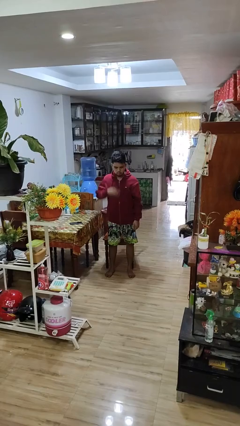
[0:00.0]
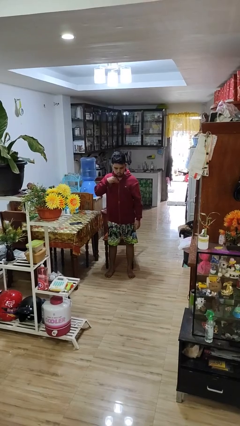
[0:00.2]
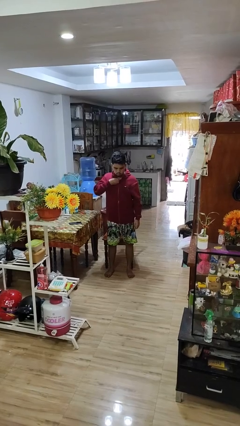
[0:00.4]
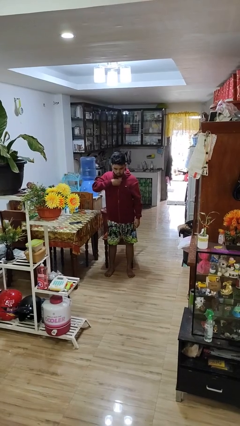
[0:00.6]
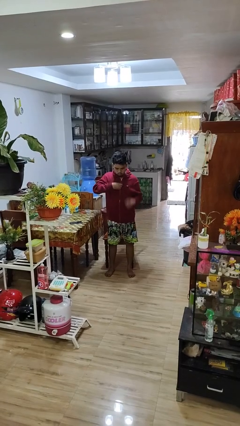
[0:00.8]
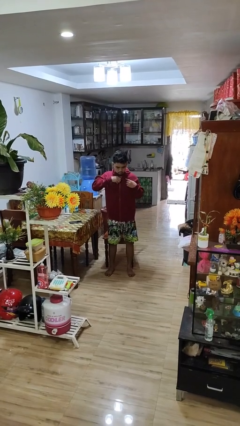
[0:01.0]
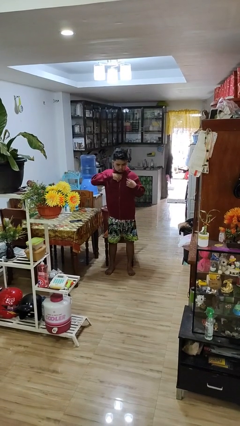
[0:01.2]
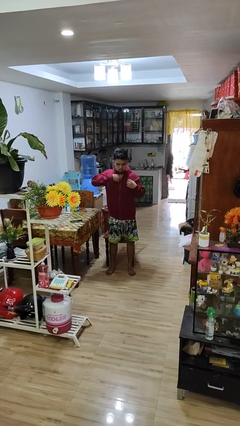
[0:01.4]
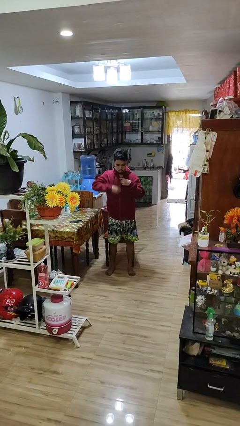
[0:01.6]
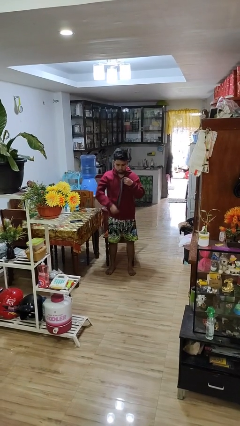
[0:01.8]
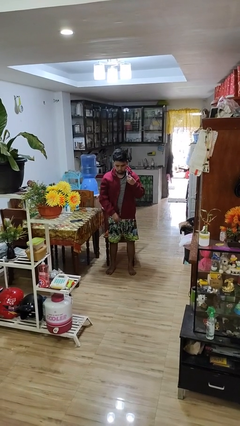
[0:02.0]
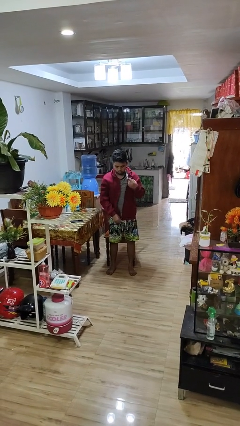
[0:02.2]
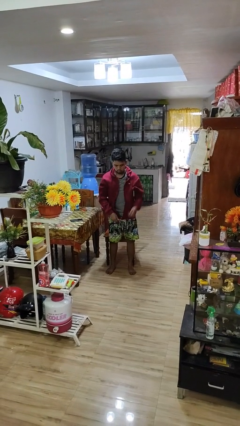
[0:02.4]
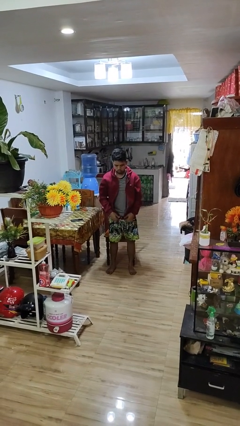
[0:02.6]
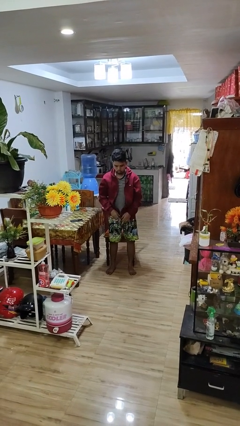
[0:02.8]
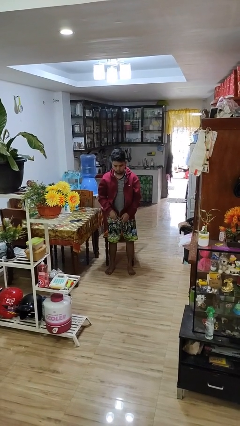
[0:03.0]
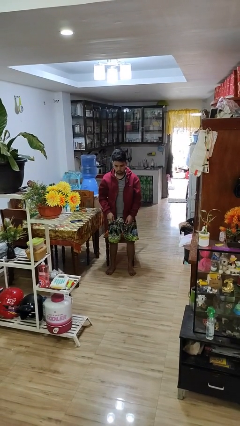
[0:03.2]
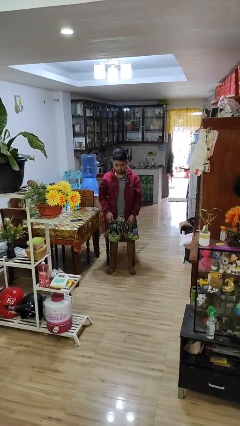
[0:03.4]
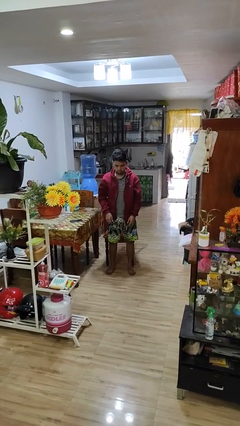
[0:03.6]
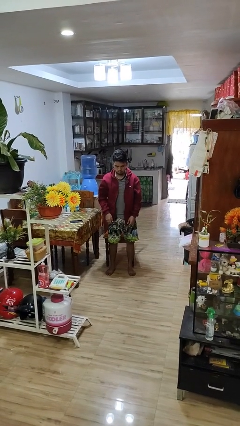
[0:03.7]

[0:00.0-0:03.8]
person unzips jacket

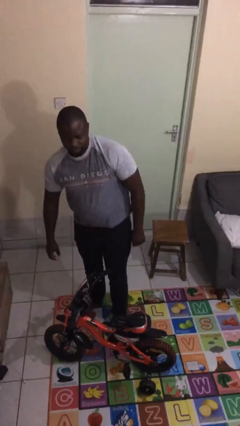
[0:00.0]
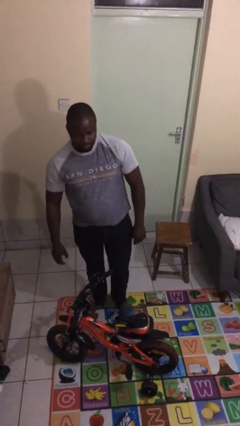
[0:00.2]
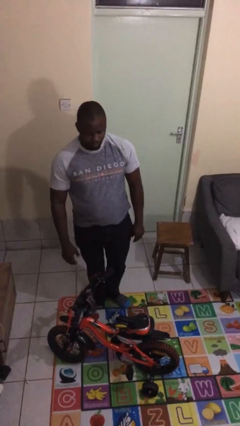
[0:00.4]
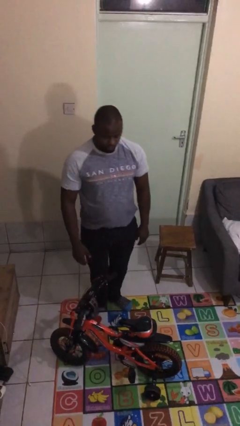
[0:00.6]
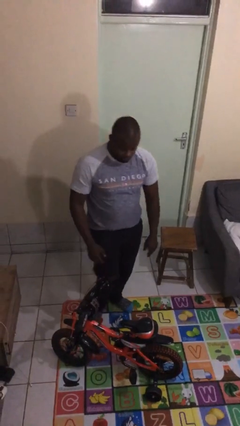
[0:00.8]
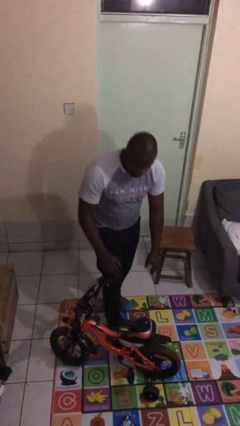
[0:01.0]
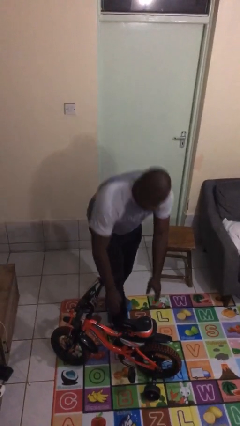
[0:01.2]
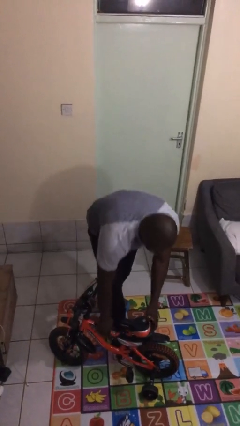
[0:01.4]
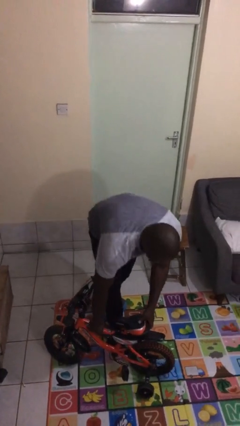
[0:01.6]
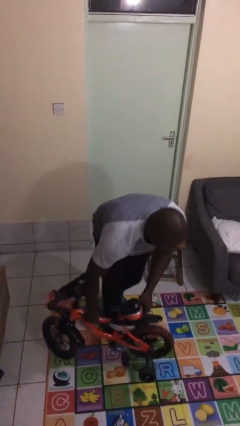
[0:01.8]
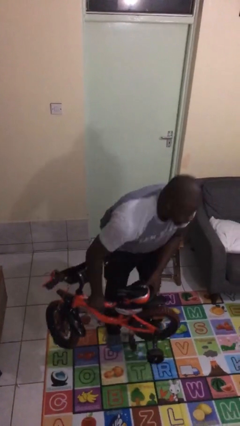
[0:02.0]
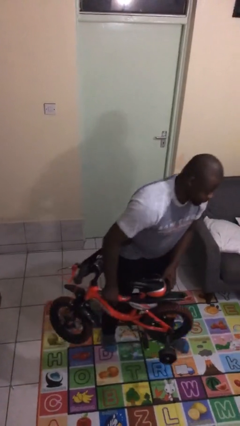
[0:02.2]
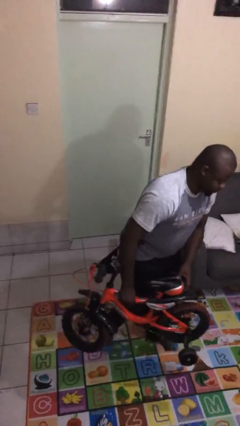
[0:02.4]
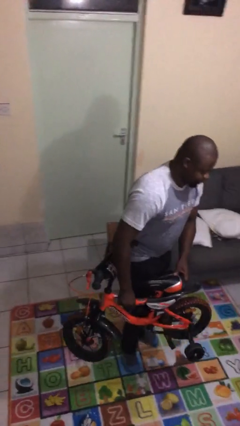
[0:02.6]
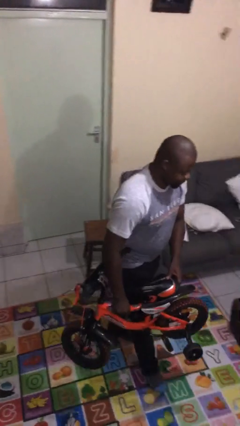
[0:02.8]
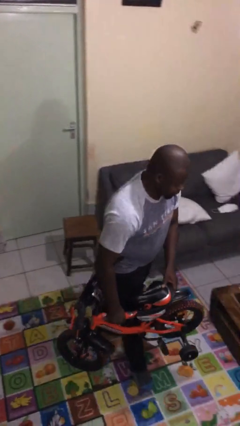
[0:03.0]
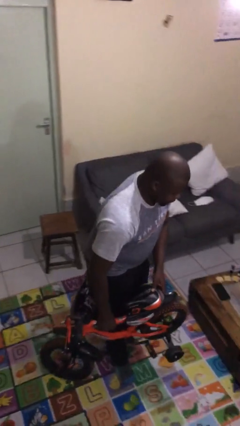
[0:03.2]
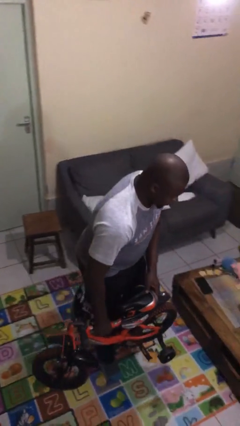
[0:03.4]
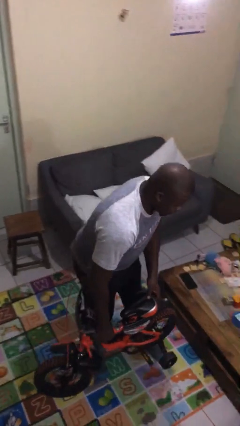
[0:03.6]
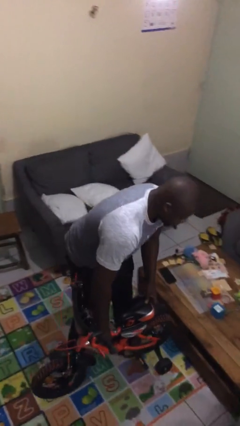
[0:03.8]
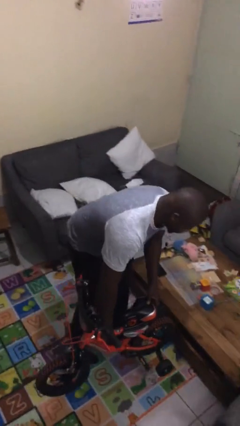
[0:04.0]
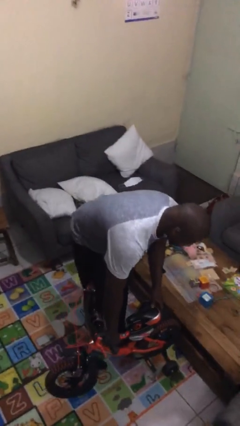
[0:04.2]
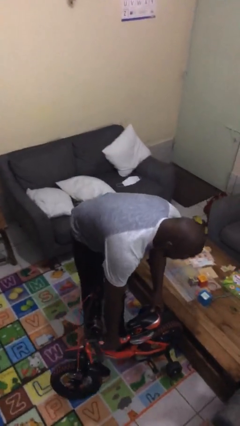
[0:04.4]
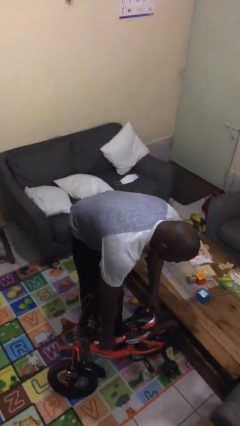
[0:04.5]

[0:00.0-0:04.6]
person carries bicycle

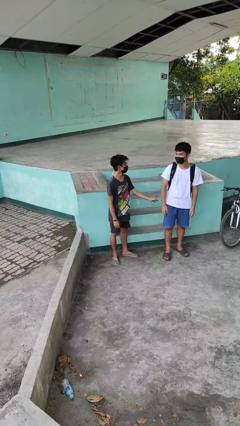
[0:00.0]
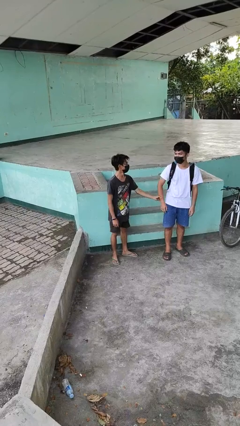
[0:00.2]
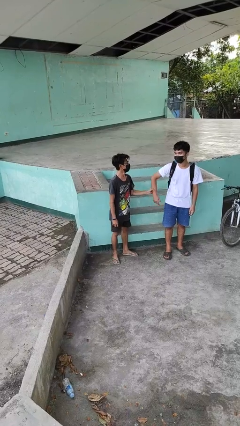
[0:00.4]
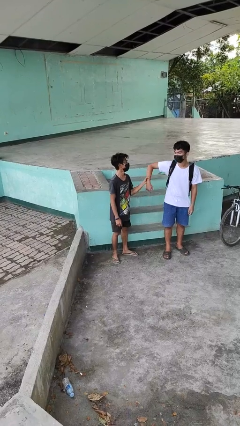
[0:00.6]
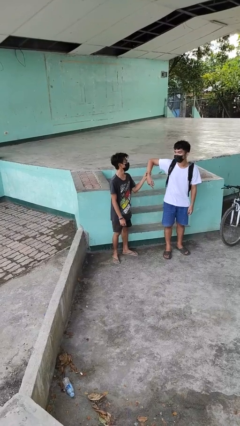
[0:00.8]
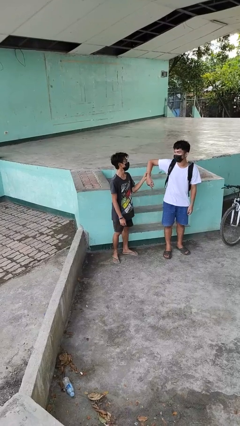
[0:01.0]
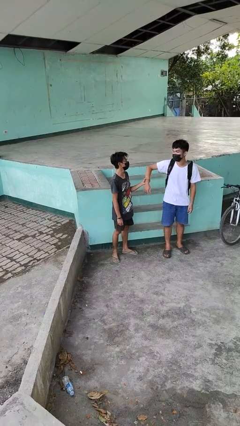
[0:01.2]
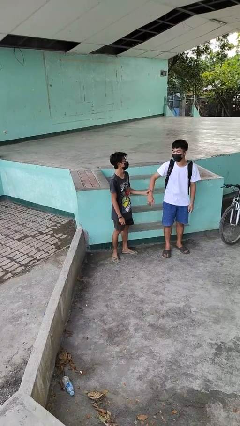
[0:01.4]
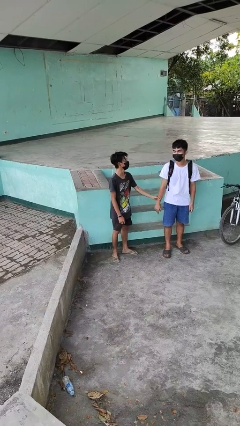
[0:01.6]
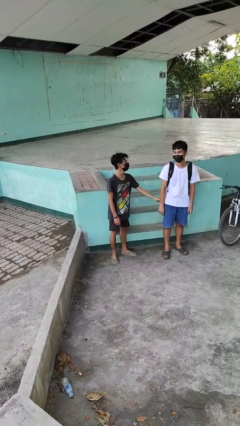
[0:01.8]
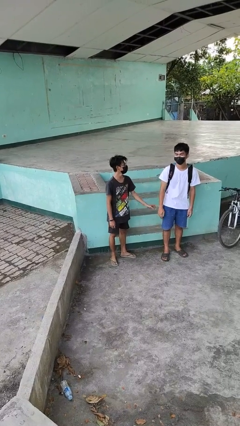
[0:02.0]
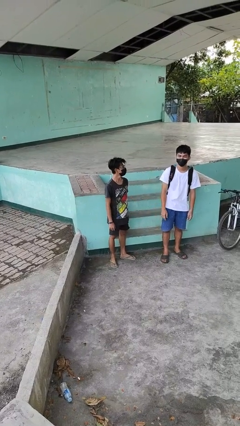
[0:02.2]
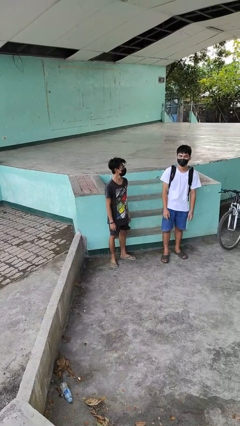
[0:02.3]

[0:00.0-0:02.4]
person grabs person by forearm

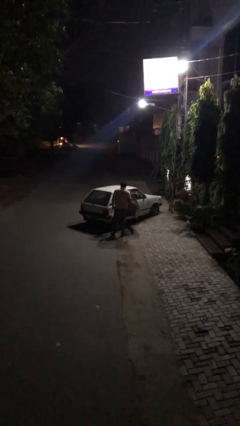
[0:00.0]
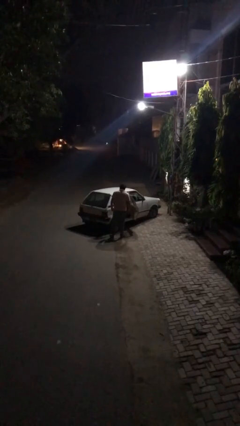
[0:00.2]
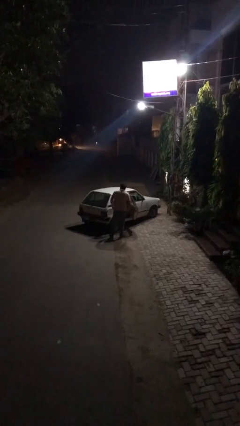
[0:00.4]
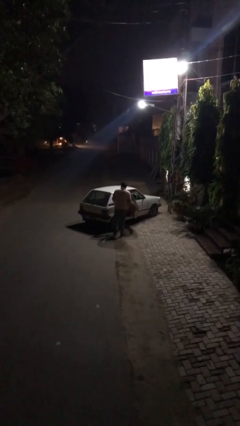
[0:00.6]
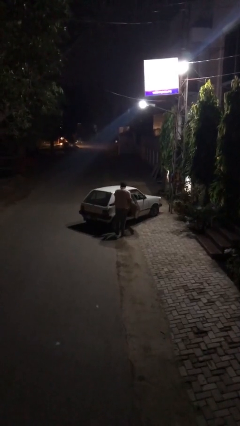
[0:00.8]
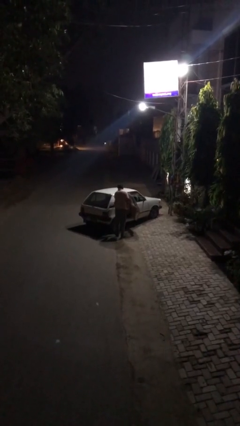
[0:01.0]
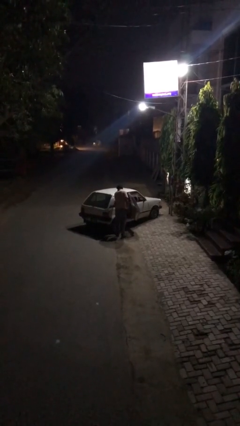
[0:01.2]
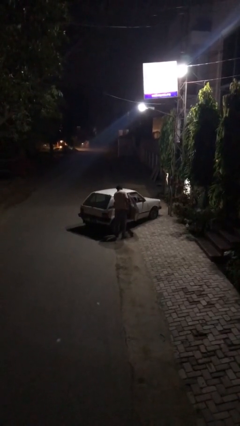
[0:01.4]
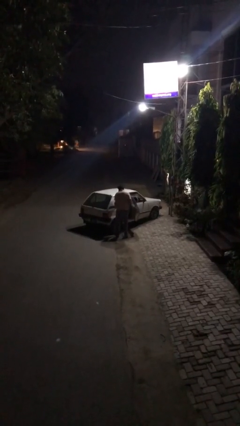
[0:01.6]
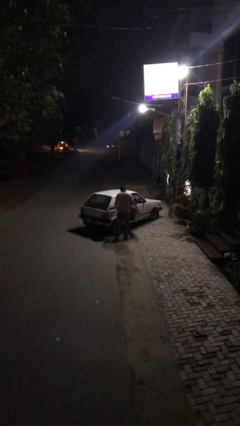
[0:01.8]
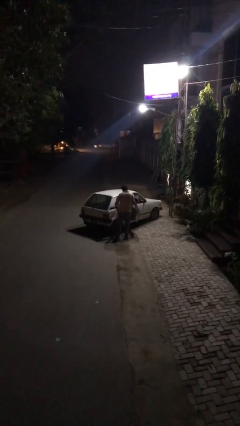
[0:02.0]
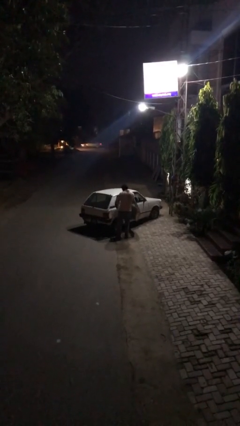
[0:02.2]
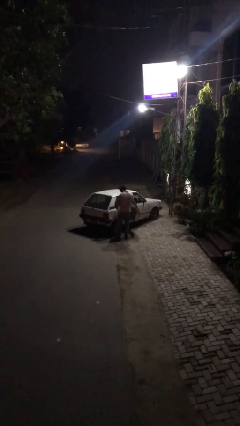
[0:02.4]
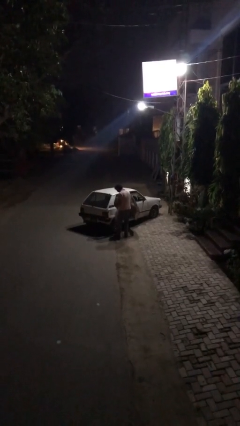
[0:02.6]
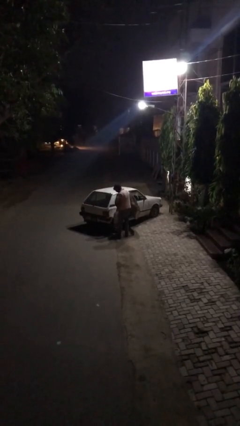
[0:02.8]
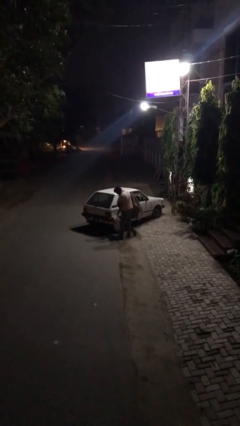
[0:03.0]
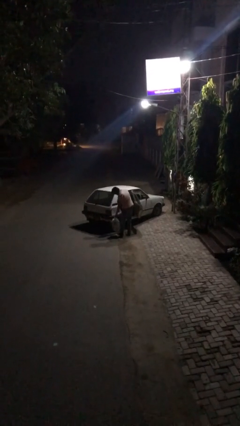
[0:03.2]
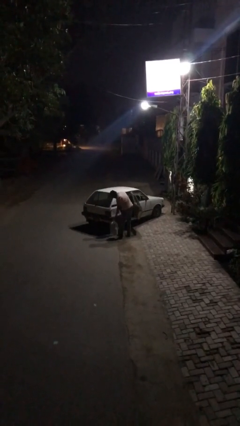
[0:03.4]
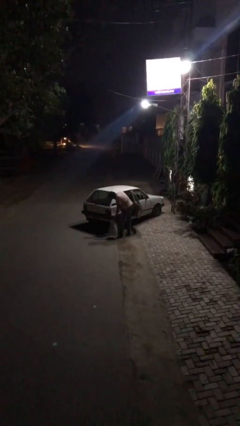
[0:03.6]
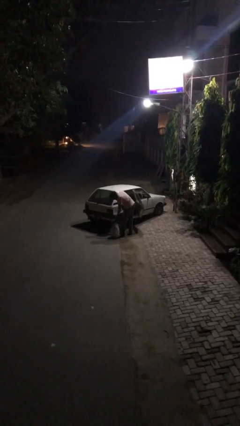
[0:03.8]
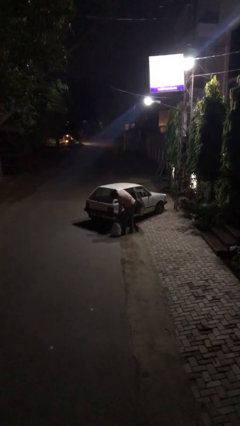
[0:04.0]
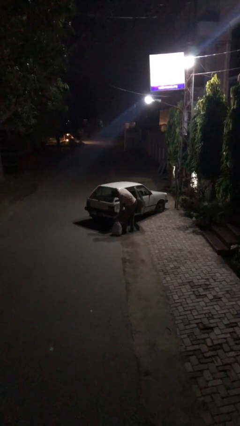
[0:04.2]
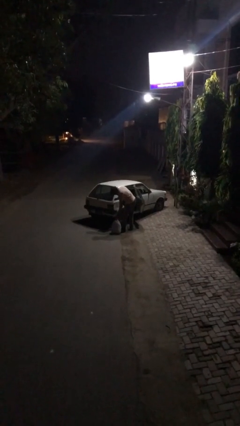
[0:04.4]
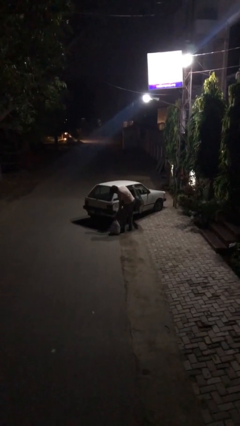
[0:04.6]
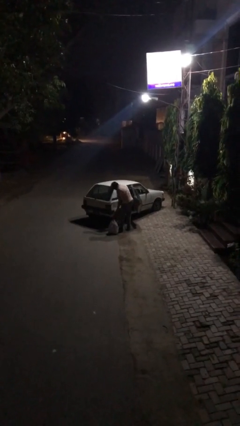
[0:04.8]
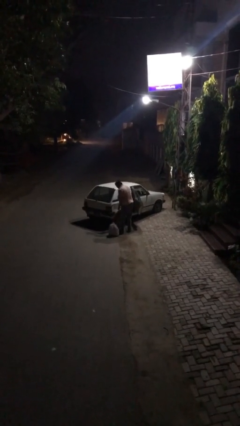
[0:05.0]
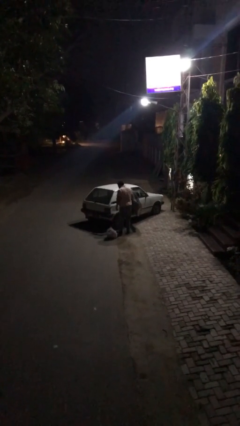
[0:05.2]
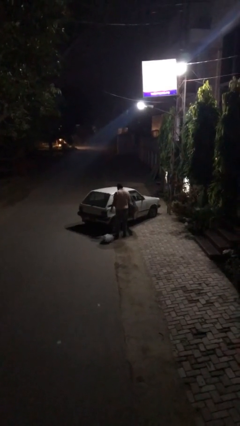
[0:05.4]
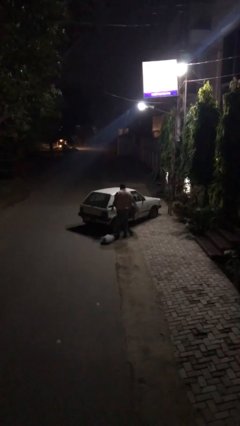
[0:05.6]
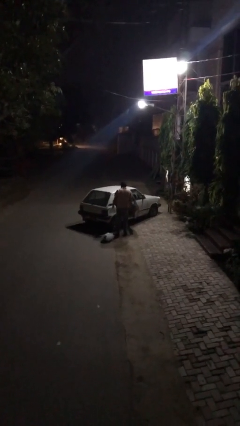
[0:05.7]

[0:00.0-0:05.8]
person unloads car

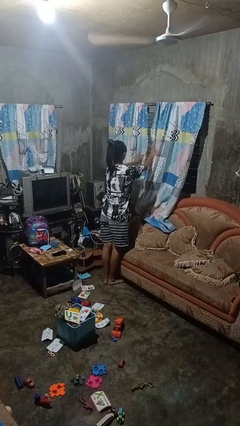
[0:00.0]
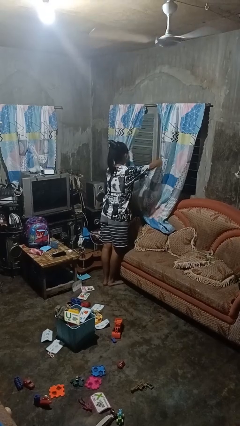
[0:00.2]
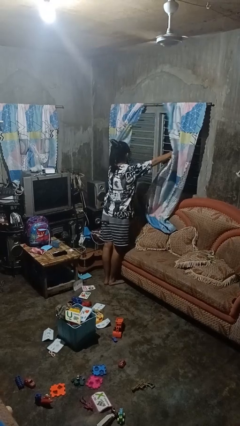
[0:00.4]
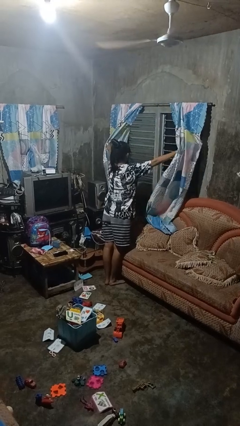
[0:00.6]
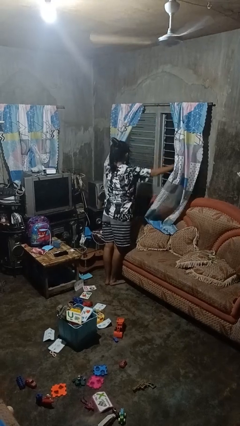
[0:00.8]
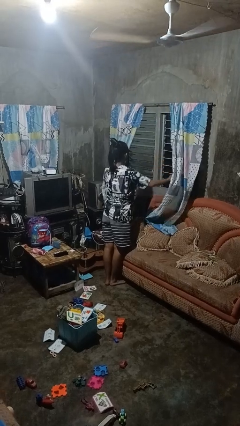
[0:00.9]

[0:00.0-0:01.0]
person opens curtains
